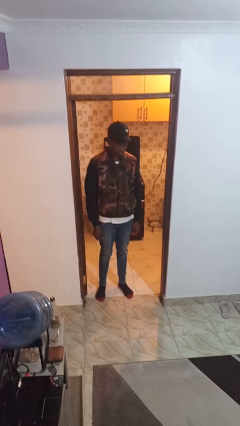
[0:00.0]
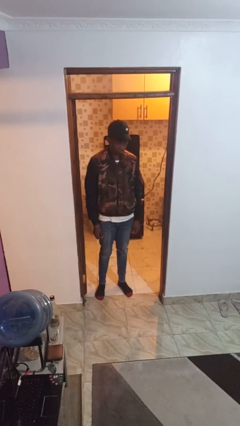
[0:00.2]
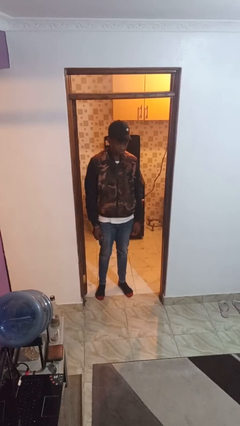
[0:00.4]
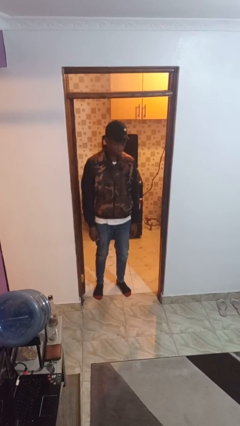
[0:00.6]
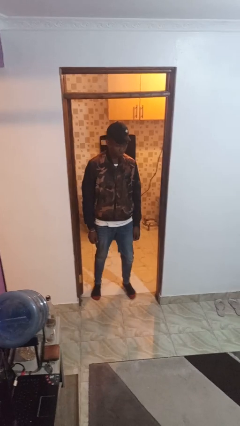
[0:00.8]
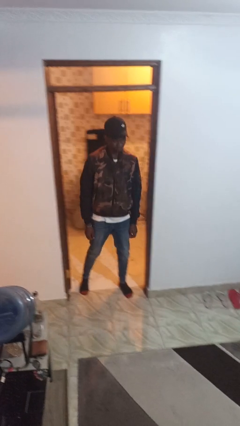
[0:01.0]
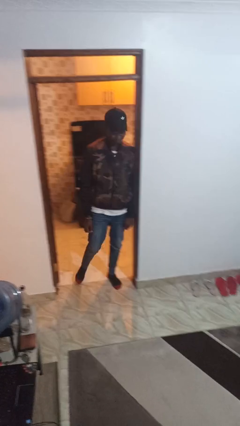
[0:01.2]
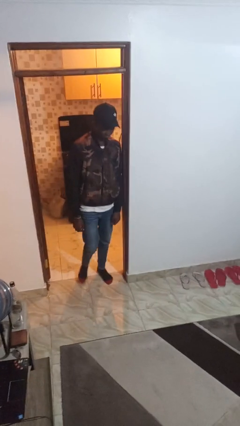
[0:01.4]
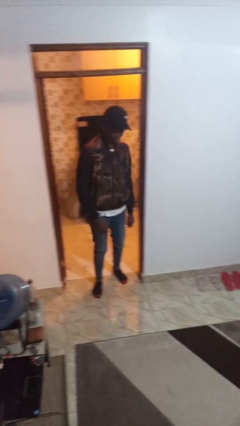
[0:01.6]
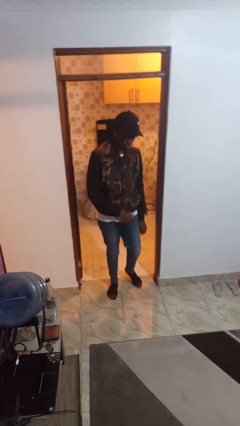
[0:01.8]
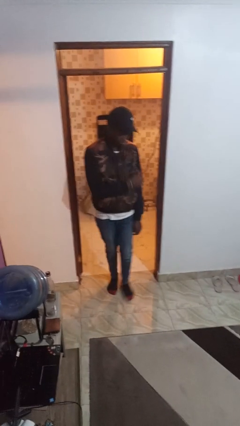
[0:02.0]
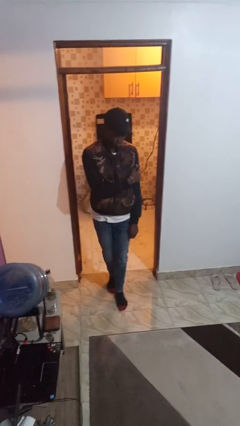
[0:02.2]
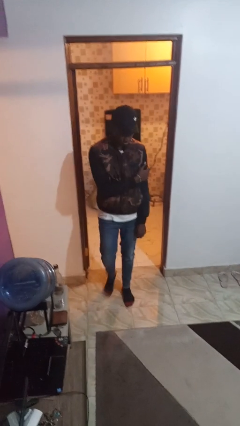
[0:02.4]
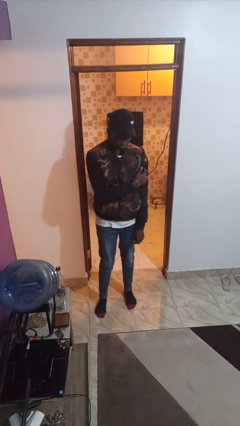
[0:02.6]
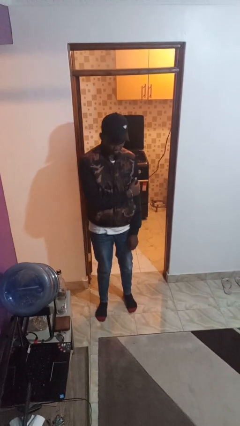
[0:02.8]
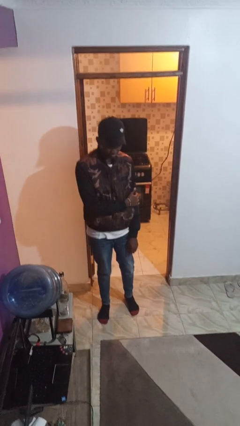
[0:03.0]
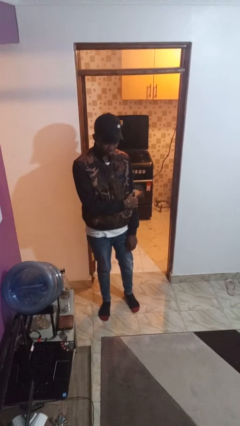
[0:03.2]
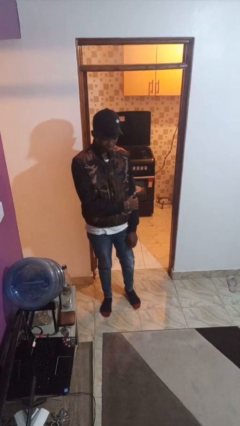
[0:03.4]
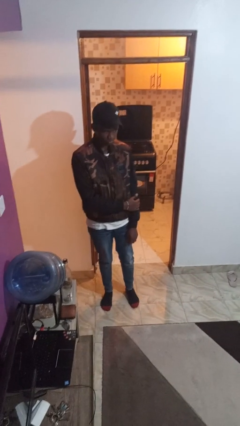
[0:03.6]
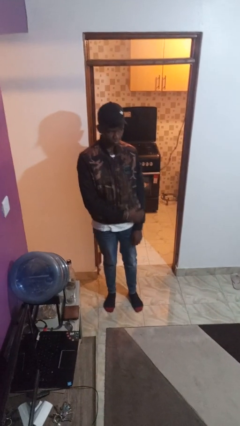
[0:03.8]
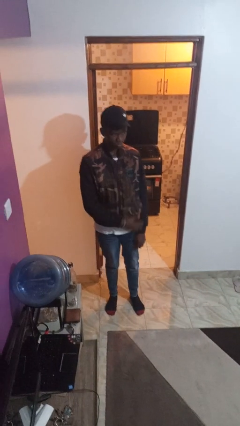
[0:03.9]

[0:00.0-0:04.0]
person bumps into wall

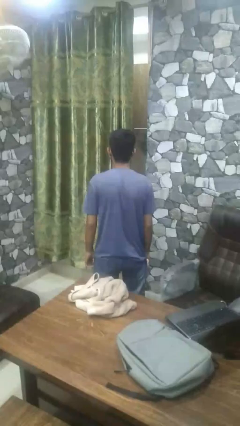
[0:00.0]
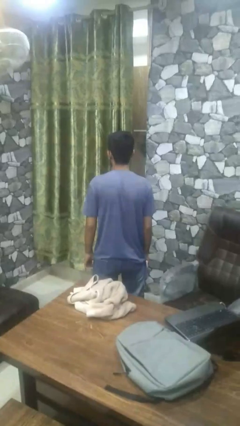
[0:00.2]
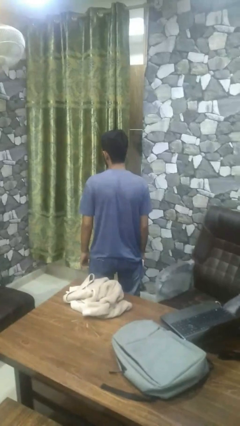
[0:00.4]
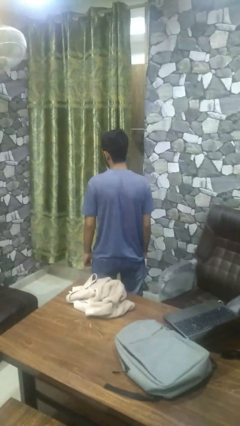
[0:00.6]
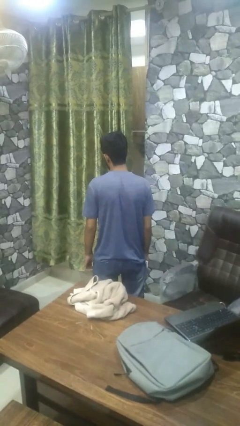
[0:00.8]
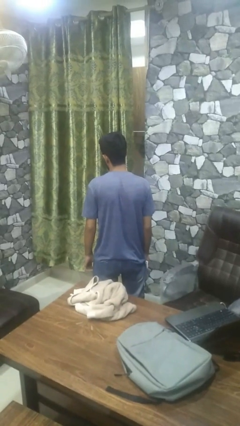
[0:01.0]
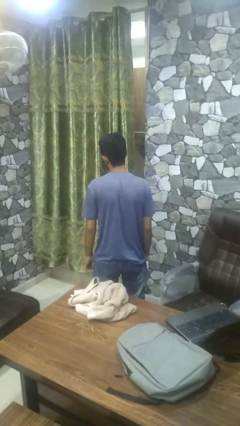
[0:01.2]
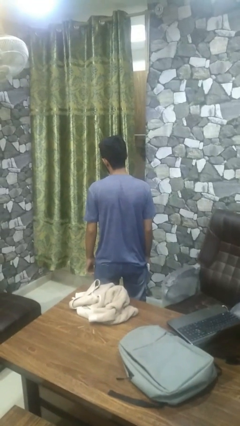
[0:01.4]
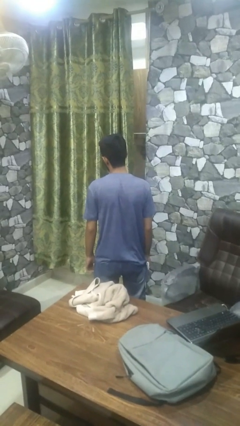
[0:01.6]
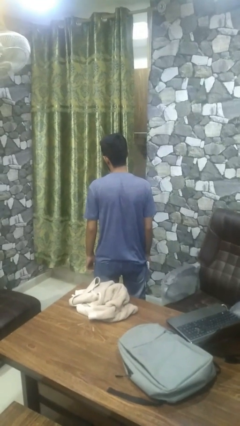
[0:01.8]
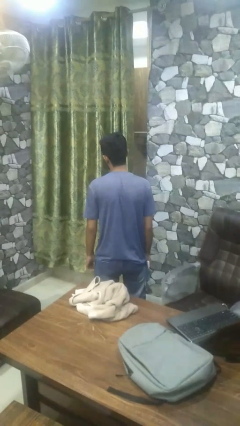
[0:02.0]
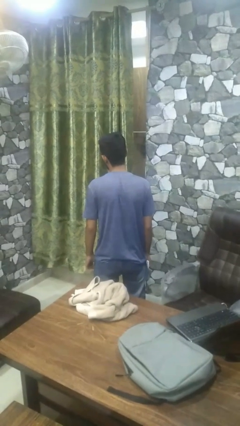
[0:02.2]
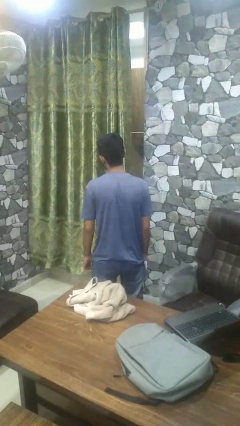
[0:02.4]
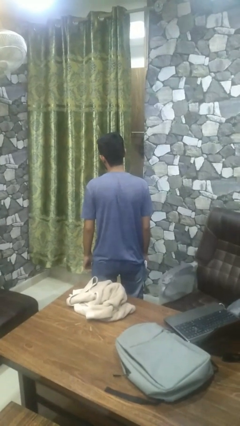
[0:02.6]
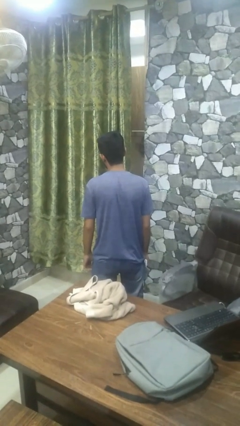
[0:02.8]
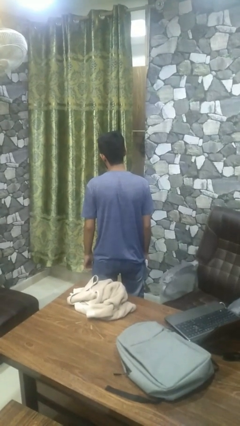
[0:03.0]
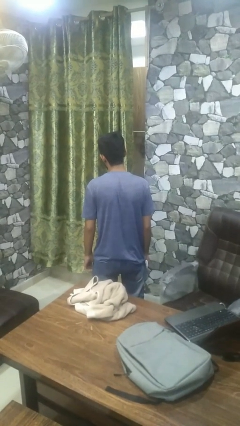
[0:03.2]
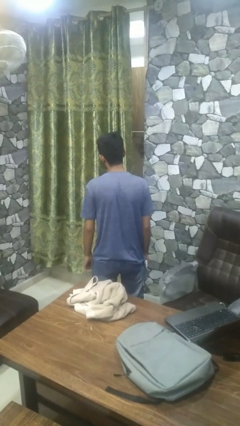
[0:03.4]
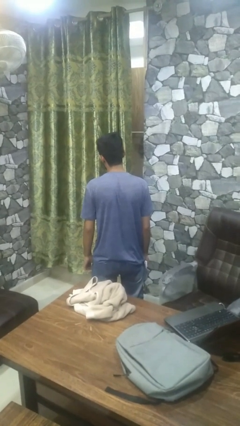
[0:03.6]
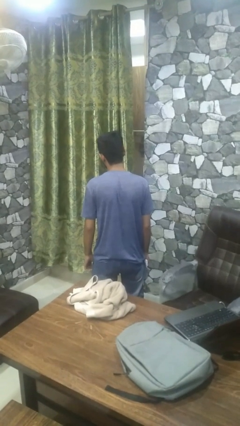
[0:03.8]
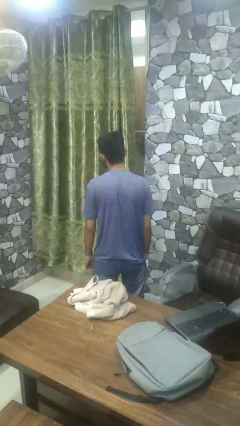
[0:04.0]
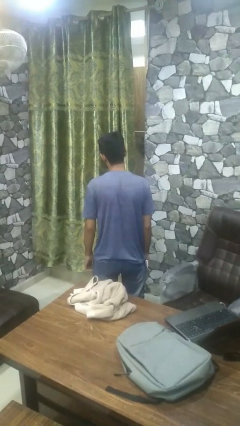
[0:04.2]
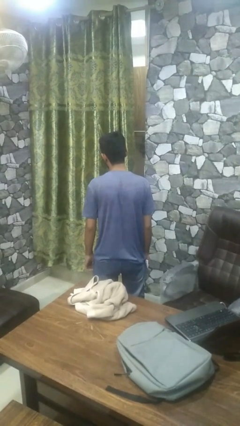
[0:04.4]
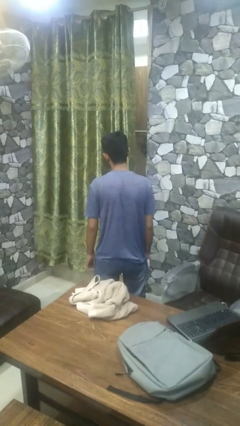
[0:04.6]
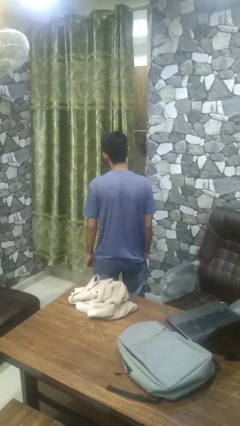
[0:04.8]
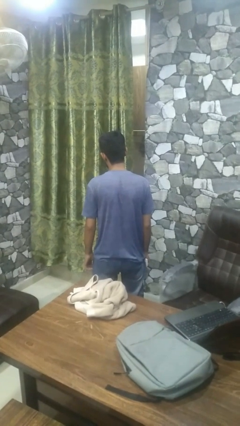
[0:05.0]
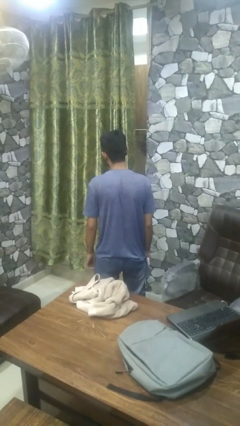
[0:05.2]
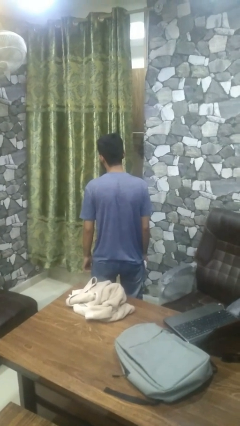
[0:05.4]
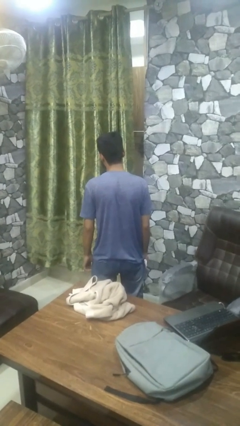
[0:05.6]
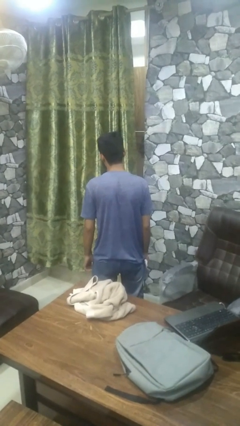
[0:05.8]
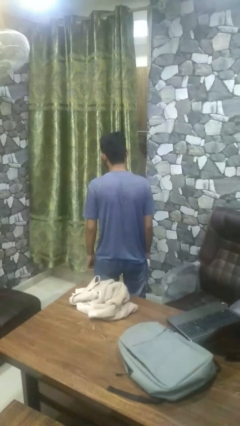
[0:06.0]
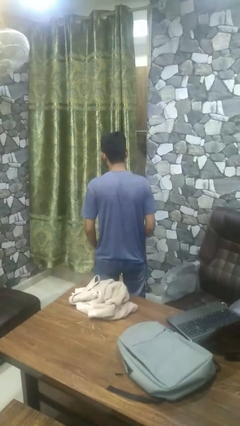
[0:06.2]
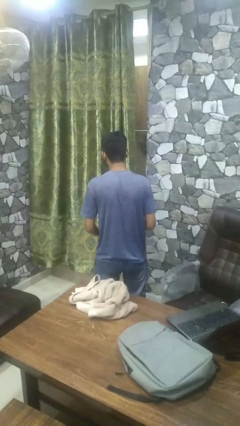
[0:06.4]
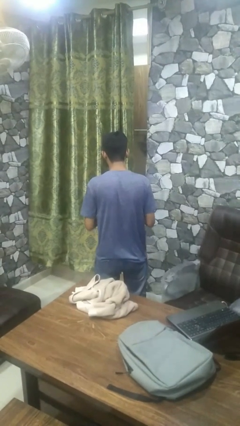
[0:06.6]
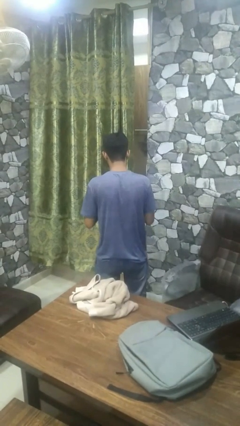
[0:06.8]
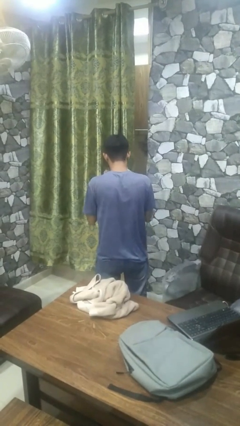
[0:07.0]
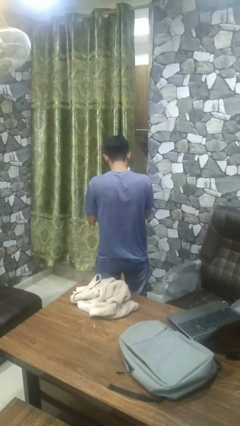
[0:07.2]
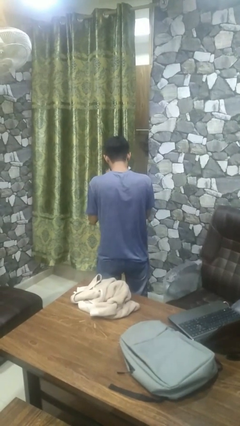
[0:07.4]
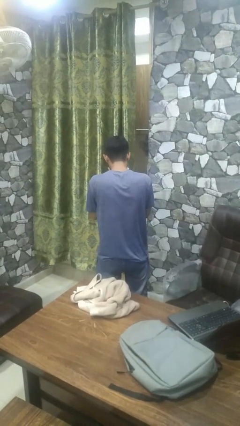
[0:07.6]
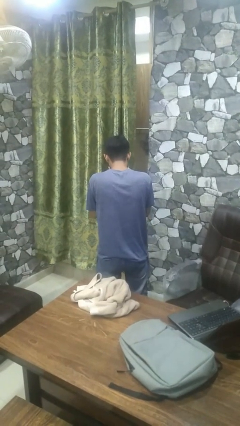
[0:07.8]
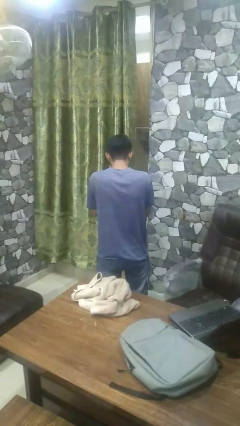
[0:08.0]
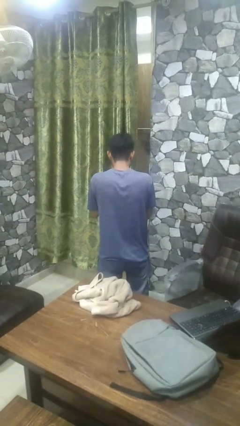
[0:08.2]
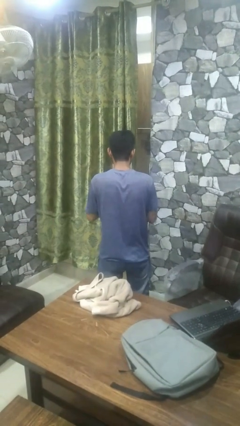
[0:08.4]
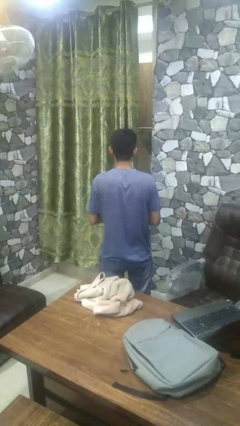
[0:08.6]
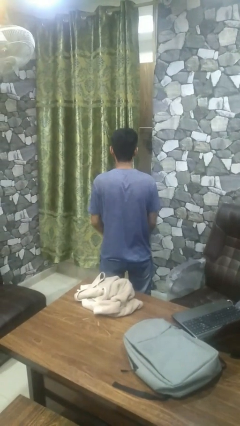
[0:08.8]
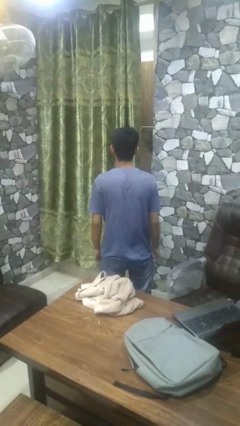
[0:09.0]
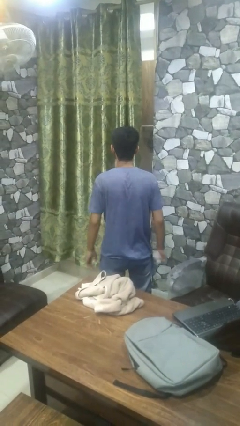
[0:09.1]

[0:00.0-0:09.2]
person blows nose

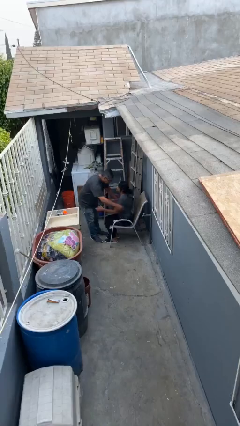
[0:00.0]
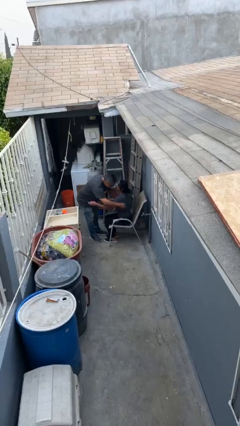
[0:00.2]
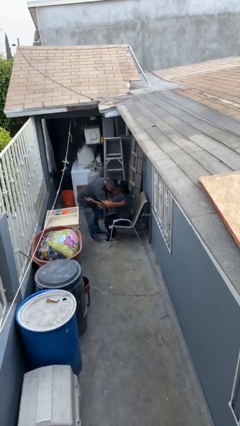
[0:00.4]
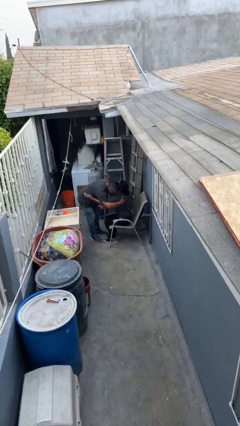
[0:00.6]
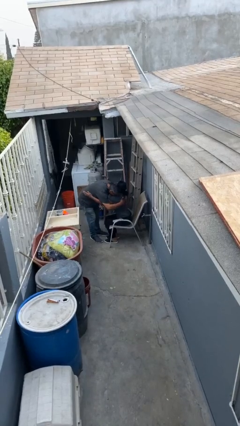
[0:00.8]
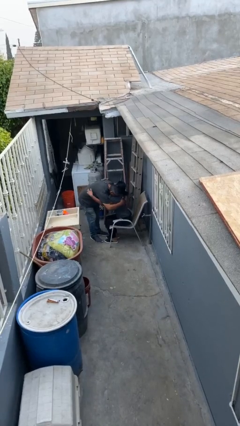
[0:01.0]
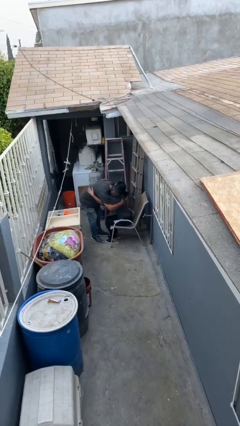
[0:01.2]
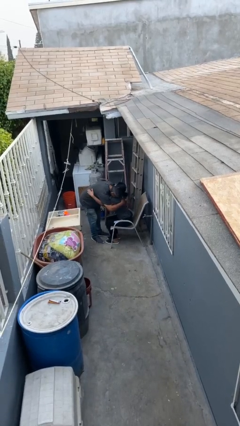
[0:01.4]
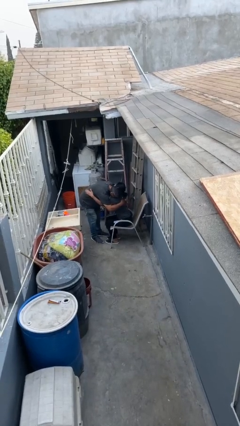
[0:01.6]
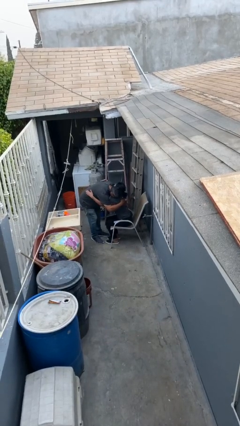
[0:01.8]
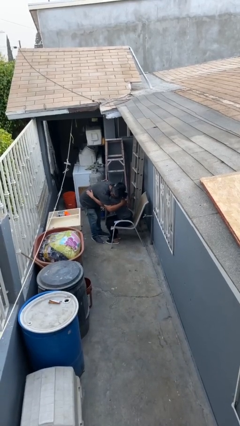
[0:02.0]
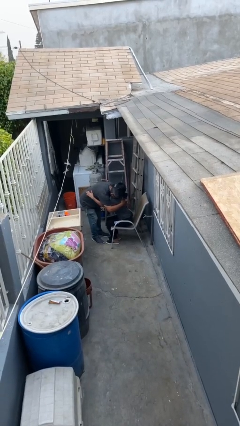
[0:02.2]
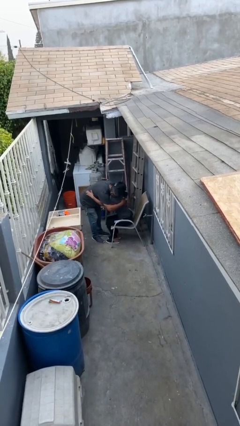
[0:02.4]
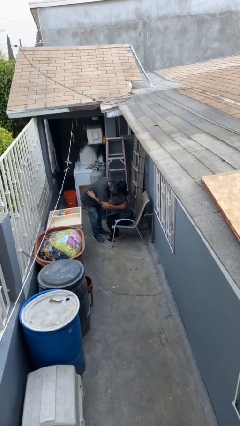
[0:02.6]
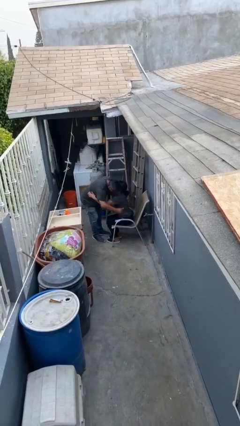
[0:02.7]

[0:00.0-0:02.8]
person embraces person

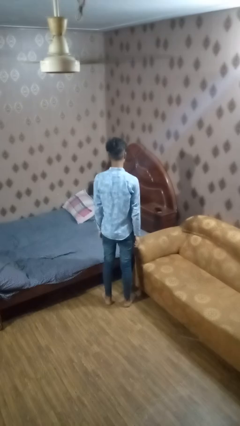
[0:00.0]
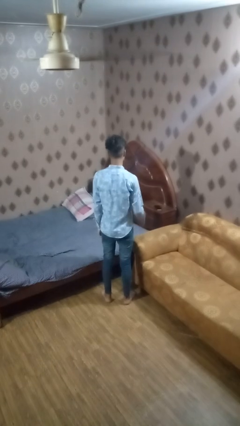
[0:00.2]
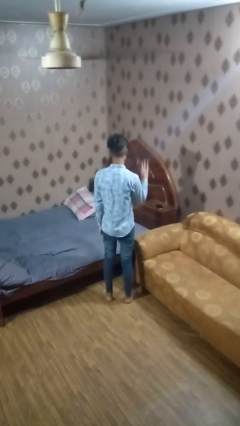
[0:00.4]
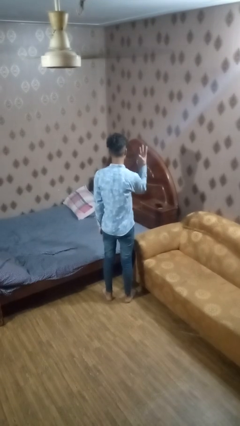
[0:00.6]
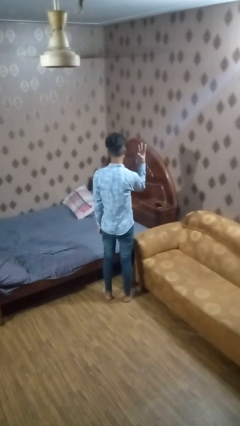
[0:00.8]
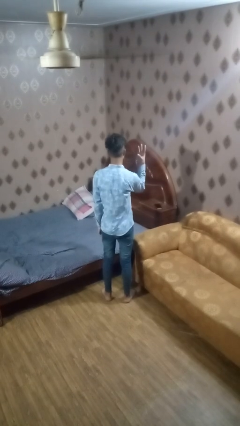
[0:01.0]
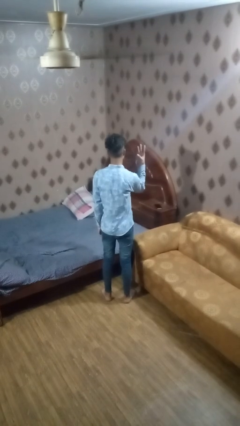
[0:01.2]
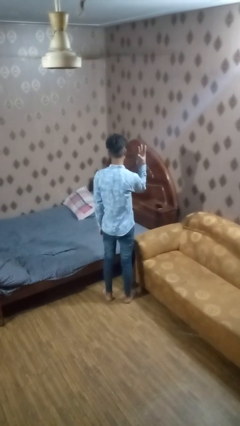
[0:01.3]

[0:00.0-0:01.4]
person gestures number three
